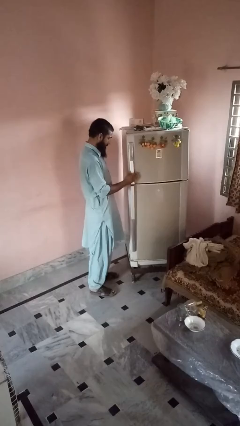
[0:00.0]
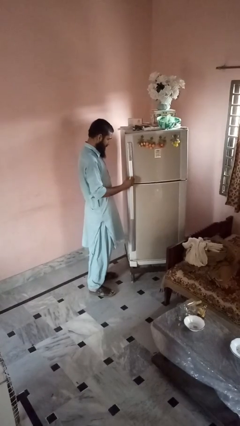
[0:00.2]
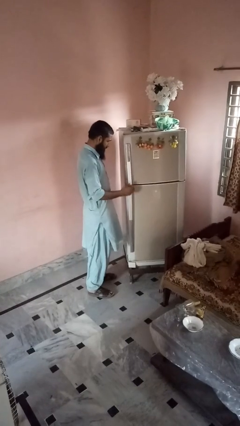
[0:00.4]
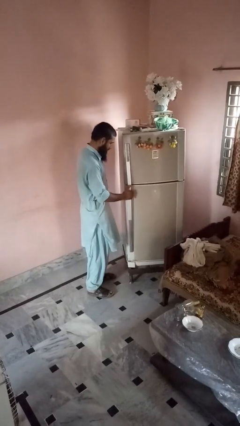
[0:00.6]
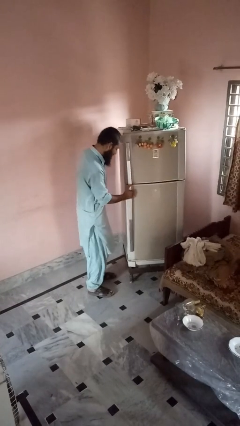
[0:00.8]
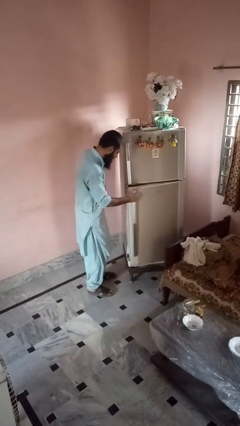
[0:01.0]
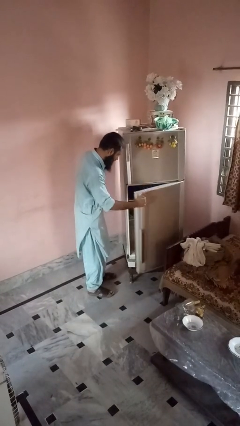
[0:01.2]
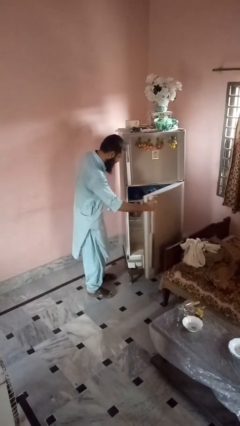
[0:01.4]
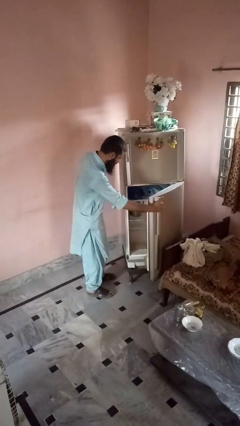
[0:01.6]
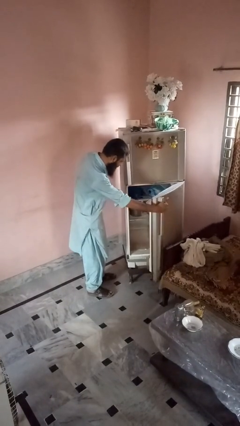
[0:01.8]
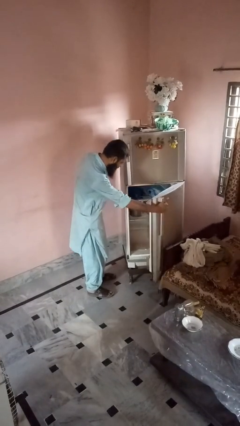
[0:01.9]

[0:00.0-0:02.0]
person opens refrigerator

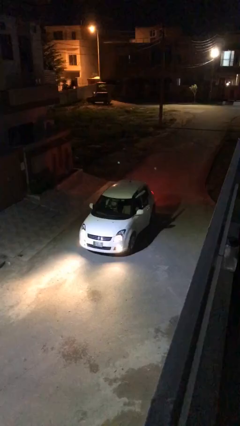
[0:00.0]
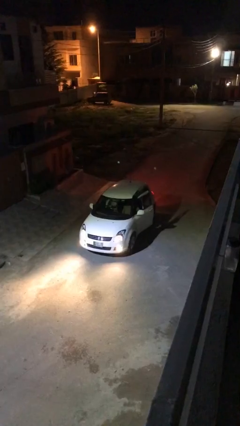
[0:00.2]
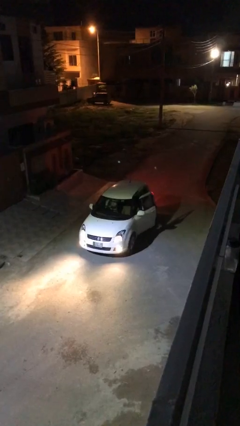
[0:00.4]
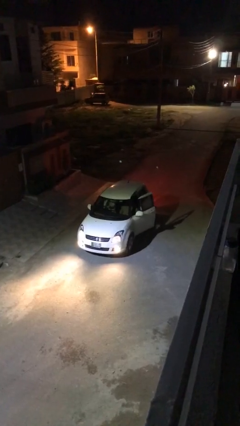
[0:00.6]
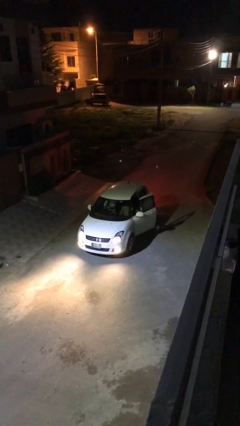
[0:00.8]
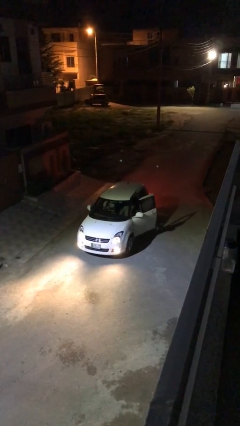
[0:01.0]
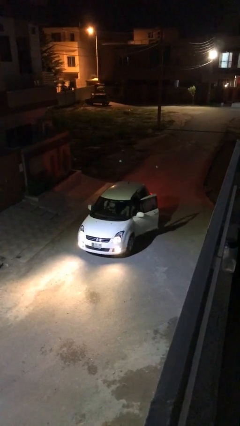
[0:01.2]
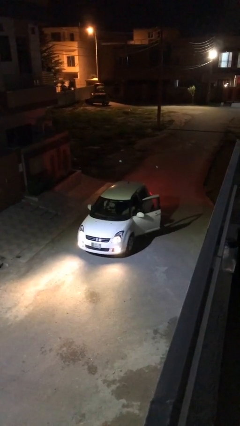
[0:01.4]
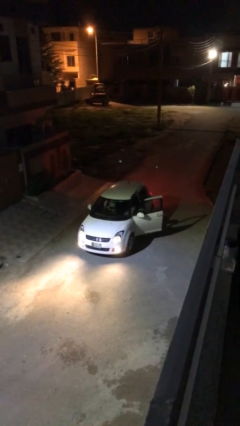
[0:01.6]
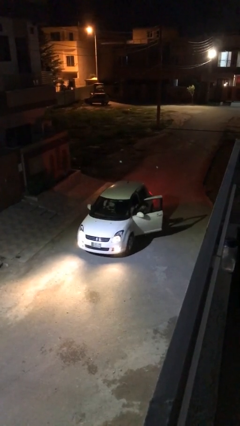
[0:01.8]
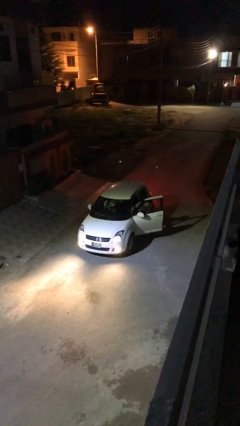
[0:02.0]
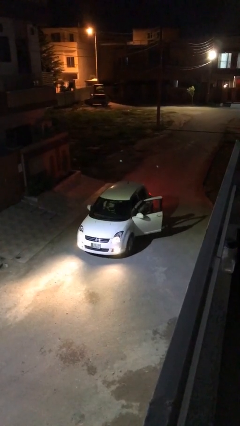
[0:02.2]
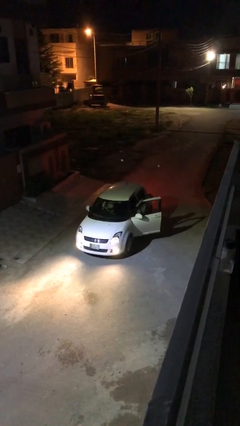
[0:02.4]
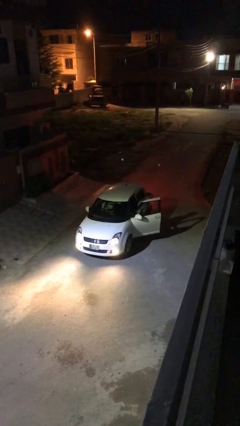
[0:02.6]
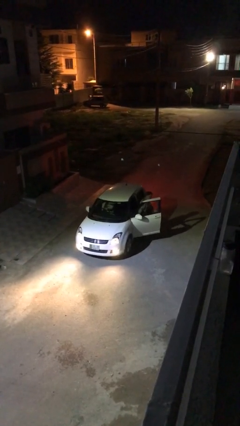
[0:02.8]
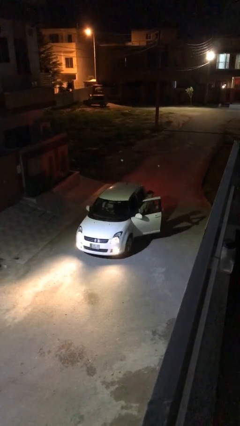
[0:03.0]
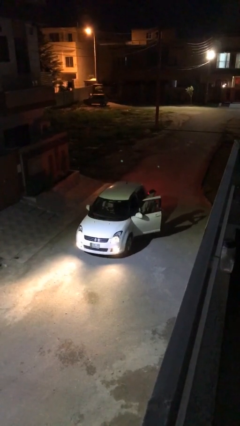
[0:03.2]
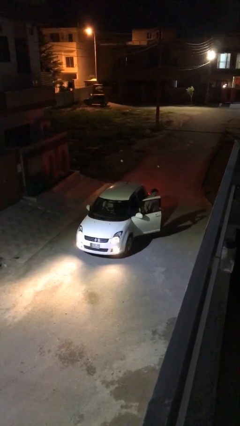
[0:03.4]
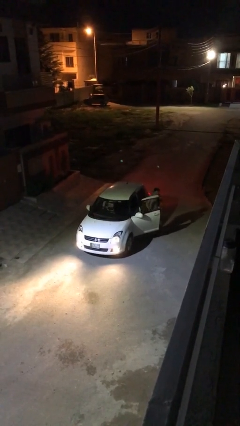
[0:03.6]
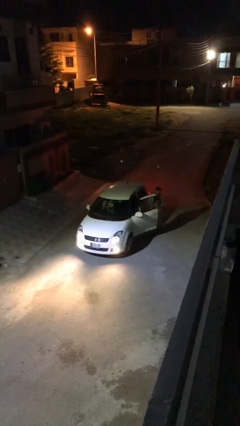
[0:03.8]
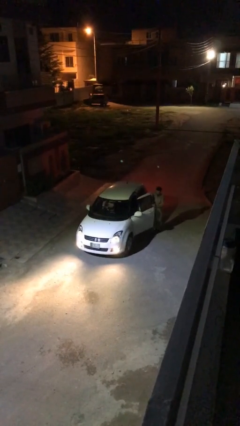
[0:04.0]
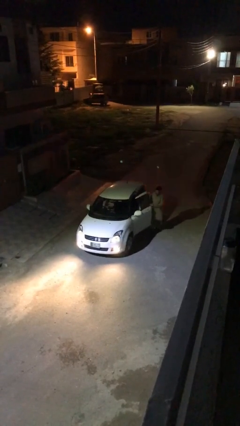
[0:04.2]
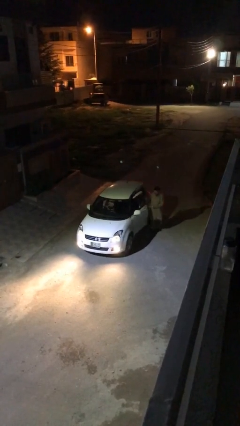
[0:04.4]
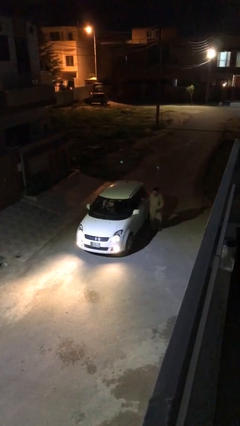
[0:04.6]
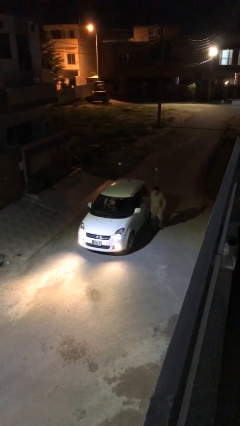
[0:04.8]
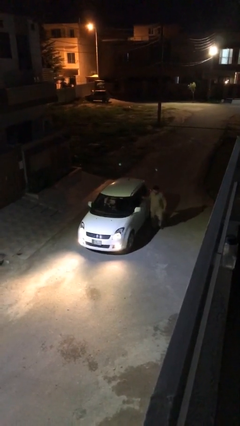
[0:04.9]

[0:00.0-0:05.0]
car drops off person

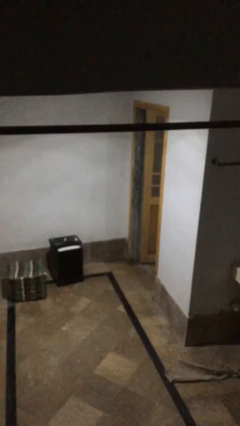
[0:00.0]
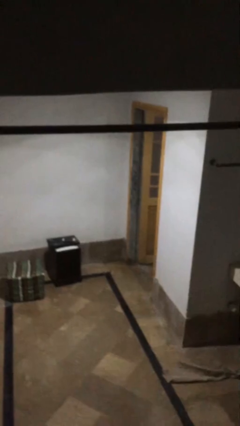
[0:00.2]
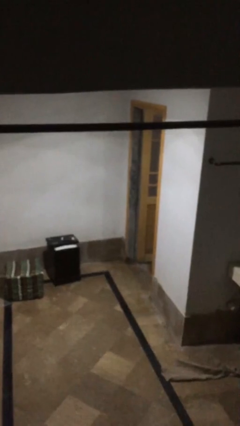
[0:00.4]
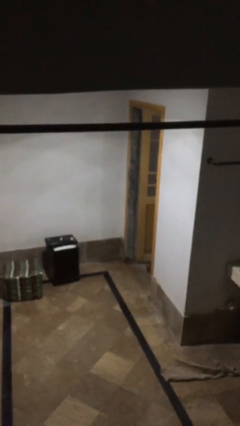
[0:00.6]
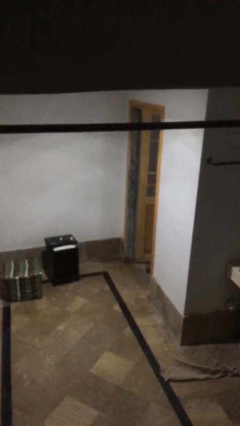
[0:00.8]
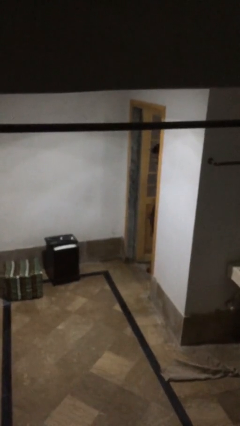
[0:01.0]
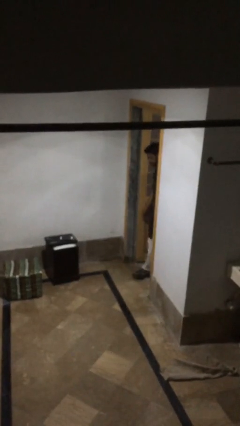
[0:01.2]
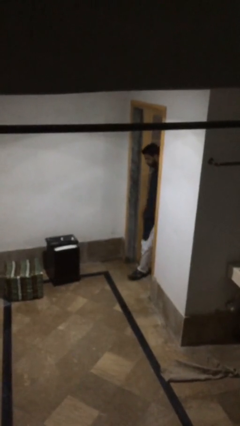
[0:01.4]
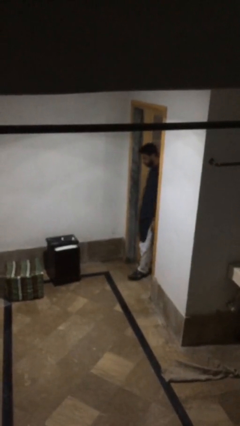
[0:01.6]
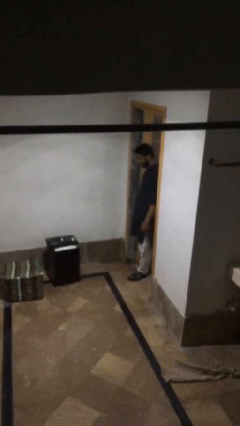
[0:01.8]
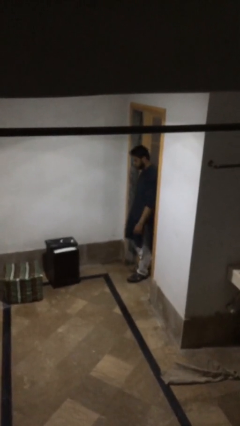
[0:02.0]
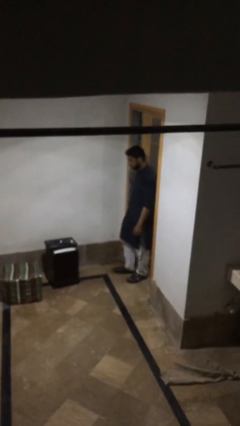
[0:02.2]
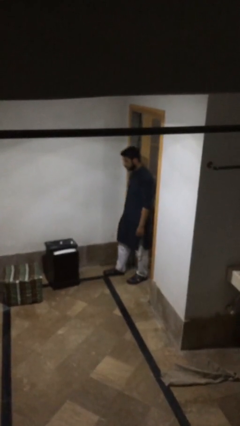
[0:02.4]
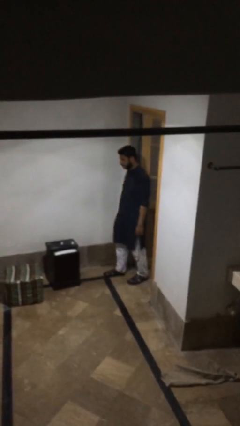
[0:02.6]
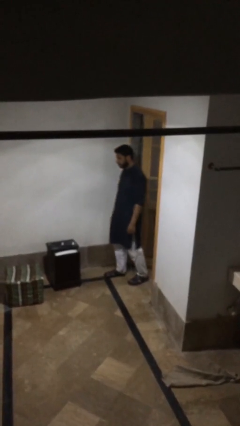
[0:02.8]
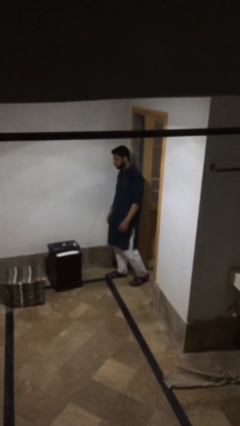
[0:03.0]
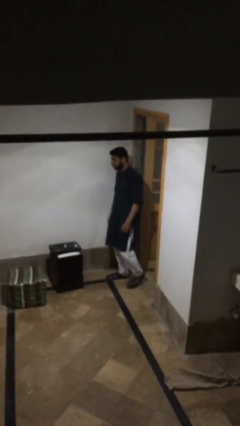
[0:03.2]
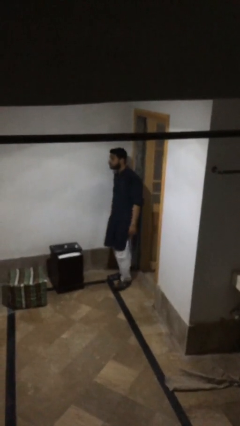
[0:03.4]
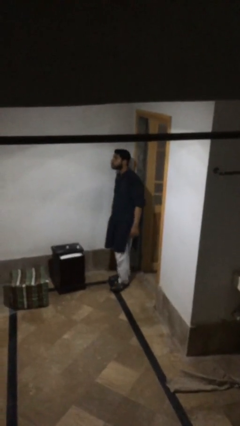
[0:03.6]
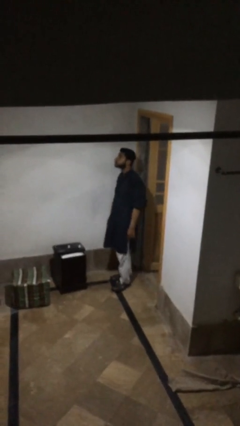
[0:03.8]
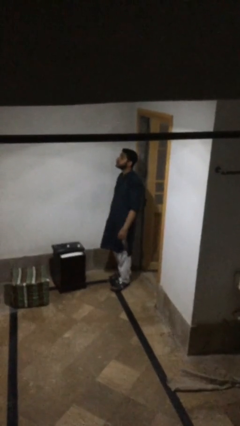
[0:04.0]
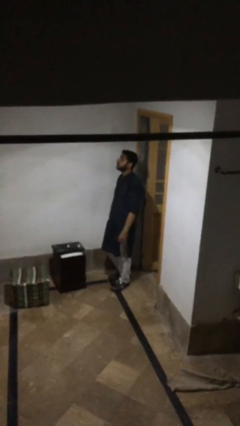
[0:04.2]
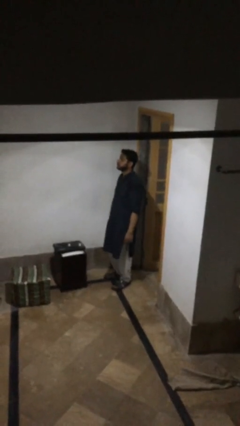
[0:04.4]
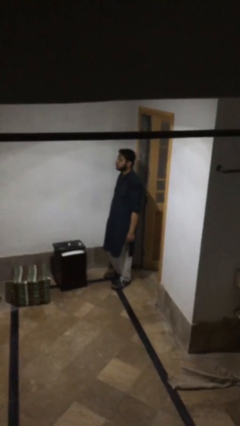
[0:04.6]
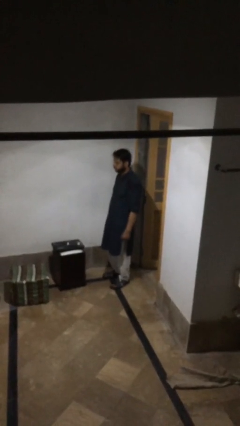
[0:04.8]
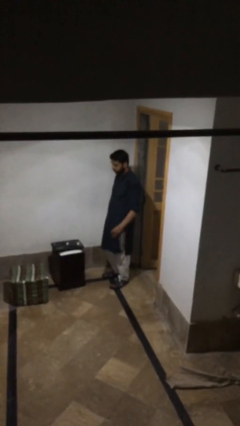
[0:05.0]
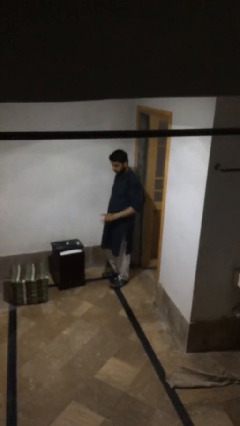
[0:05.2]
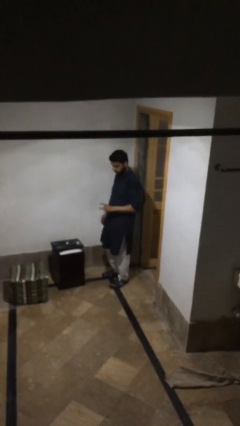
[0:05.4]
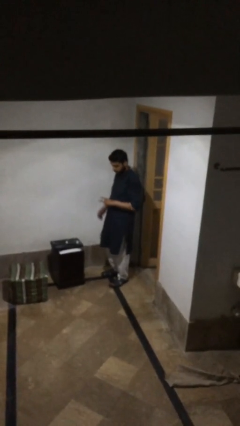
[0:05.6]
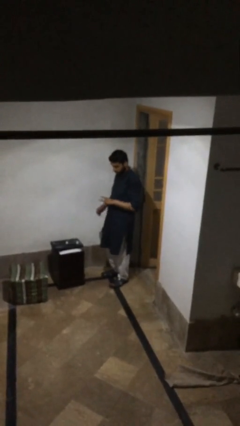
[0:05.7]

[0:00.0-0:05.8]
person enters scene through structure

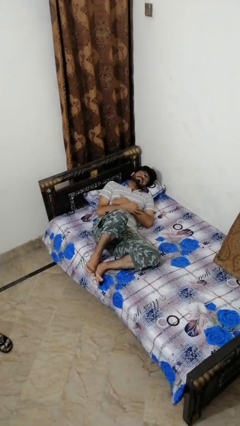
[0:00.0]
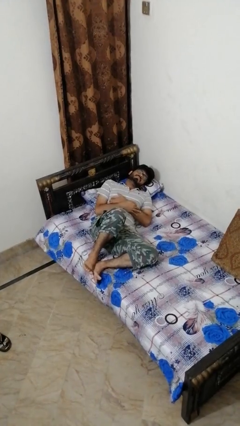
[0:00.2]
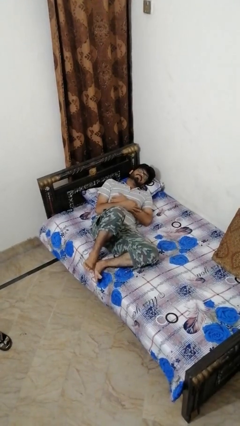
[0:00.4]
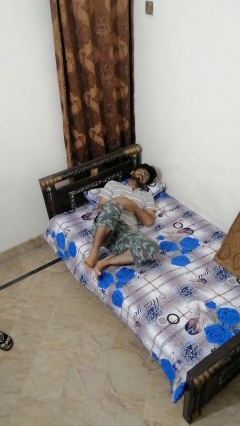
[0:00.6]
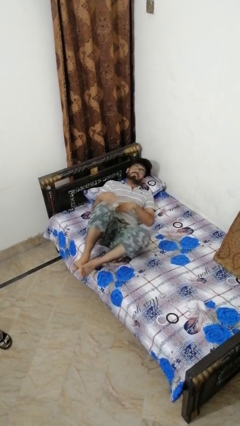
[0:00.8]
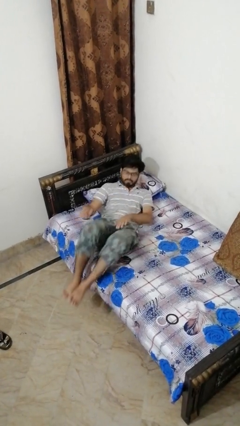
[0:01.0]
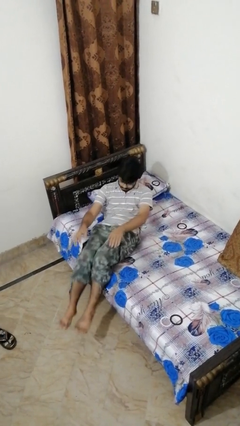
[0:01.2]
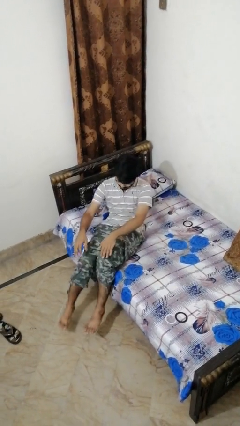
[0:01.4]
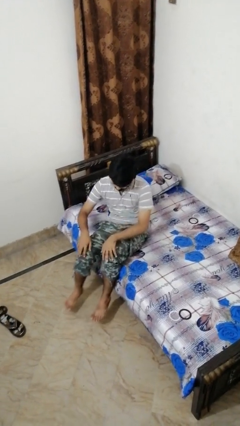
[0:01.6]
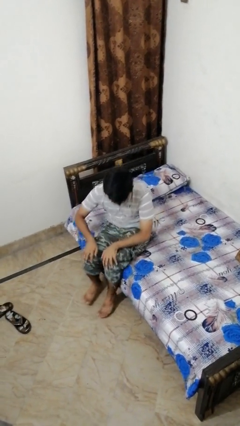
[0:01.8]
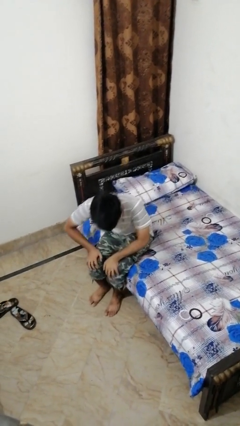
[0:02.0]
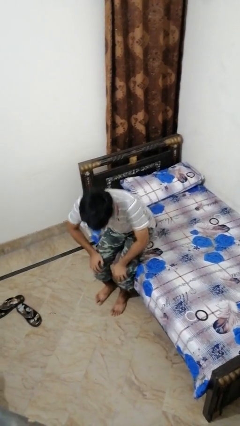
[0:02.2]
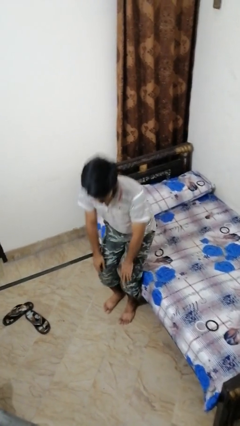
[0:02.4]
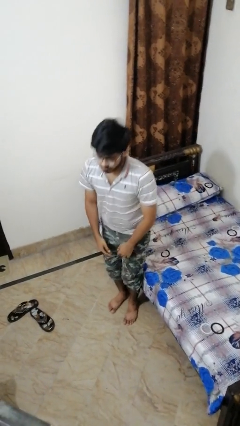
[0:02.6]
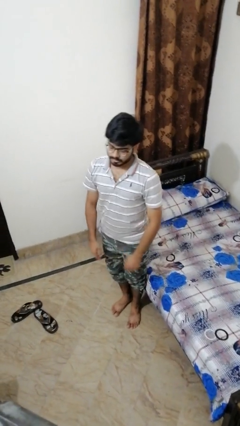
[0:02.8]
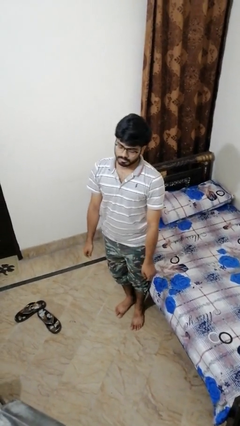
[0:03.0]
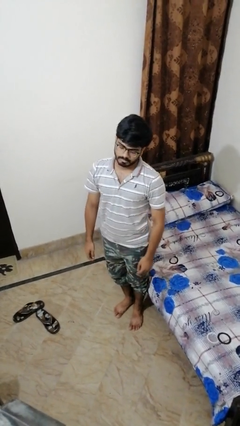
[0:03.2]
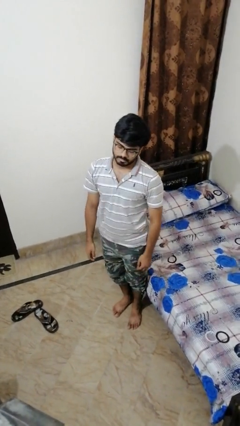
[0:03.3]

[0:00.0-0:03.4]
person stands up

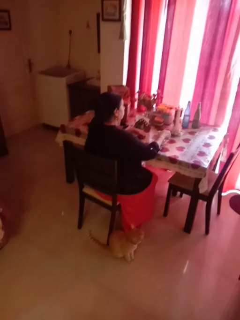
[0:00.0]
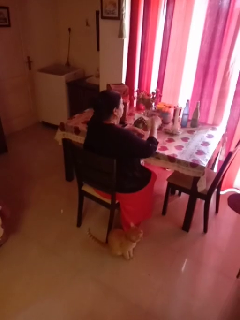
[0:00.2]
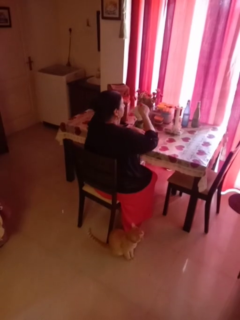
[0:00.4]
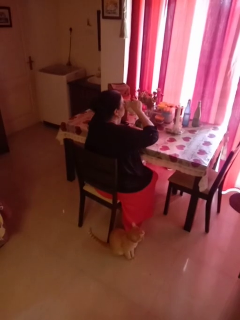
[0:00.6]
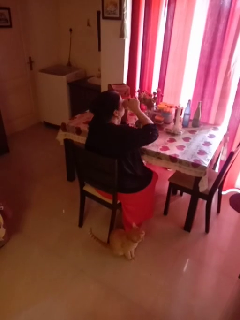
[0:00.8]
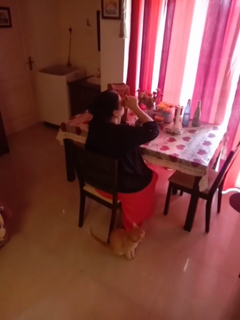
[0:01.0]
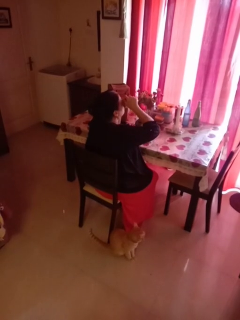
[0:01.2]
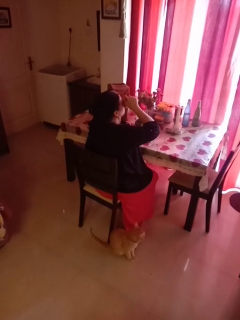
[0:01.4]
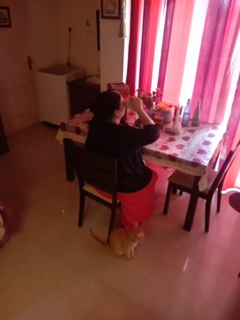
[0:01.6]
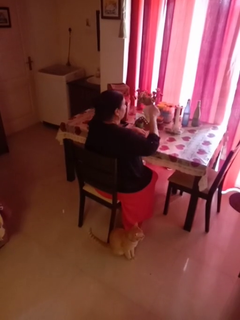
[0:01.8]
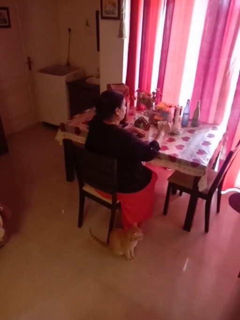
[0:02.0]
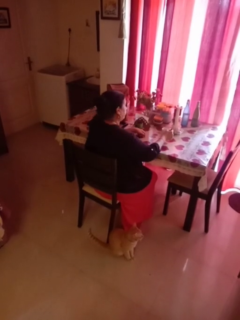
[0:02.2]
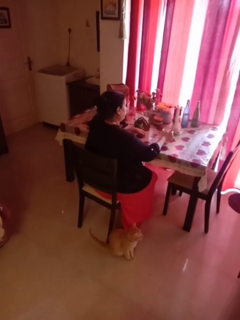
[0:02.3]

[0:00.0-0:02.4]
person drinks from mug
